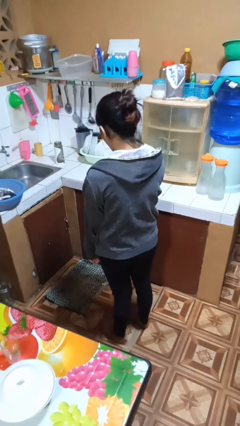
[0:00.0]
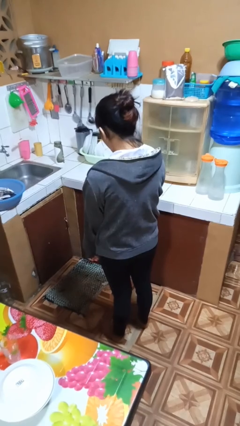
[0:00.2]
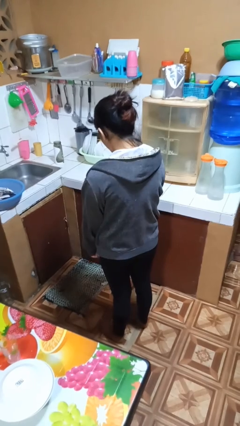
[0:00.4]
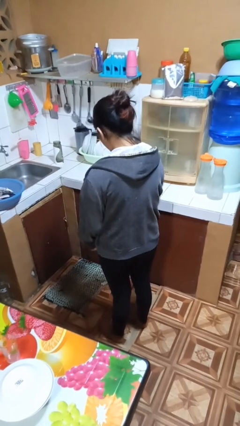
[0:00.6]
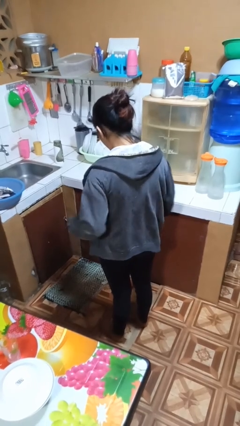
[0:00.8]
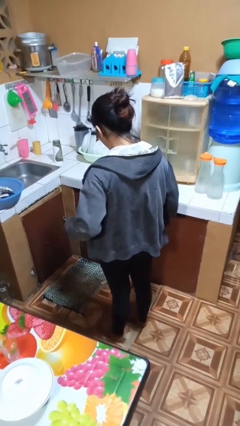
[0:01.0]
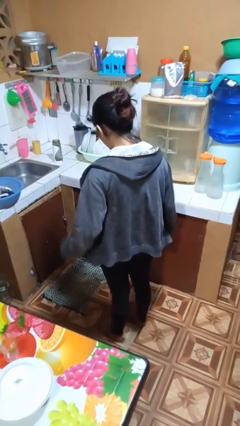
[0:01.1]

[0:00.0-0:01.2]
person unzips jacket

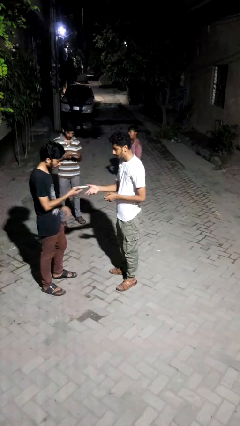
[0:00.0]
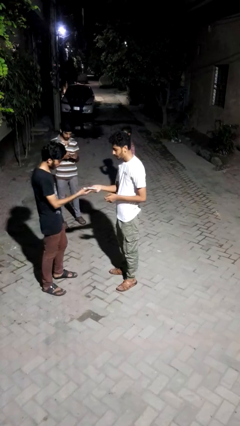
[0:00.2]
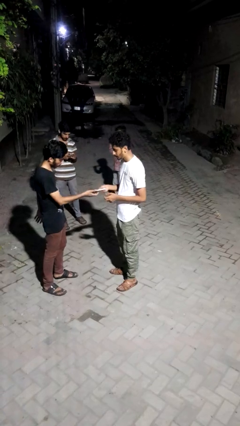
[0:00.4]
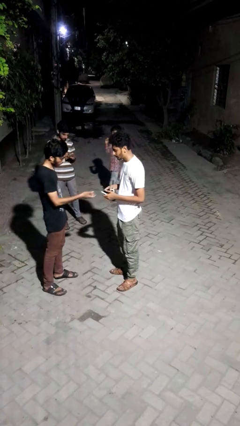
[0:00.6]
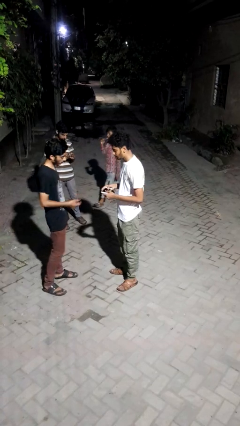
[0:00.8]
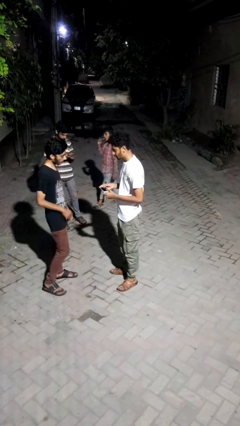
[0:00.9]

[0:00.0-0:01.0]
person transfers object to person

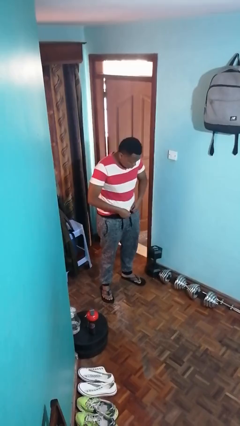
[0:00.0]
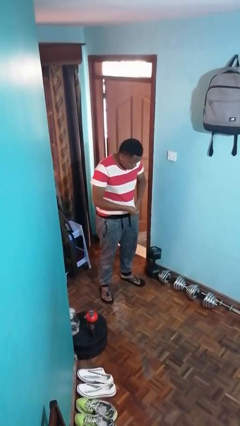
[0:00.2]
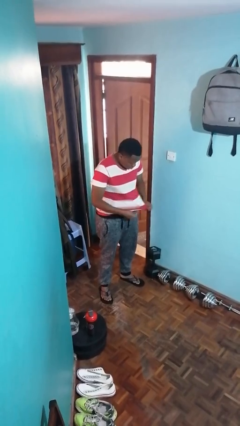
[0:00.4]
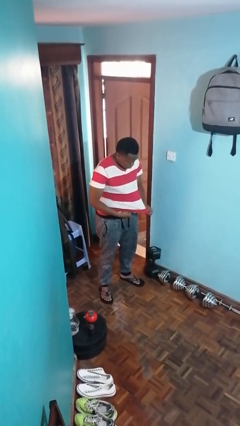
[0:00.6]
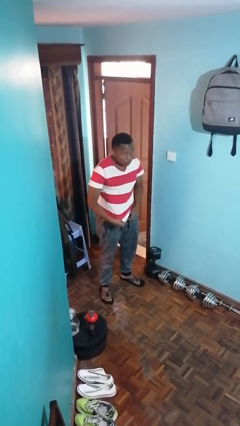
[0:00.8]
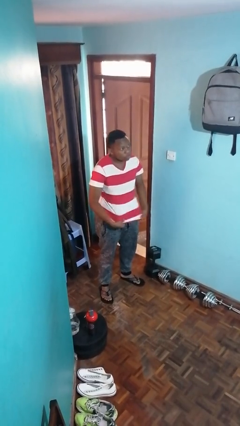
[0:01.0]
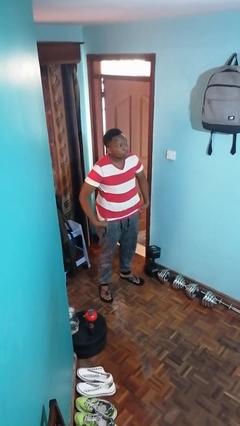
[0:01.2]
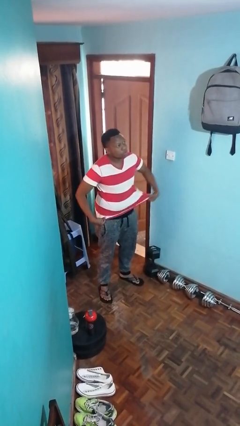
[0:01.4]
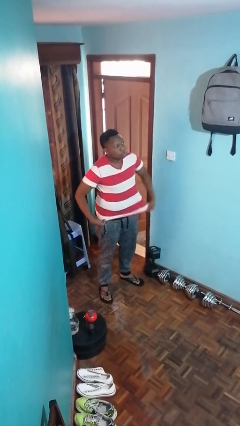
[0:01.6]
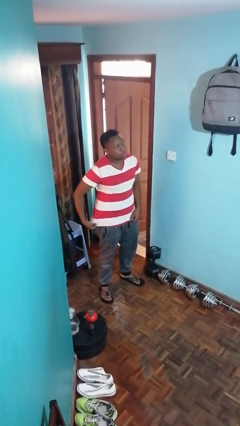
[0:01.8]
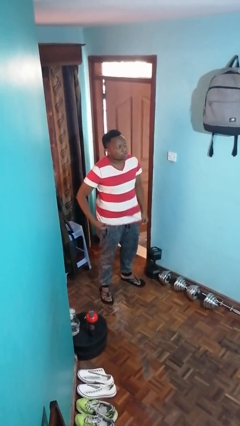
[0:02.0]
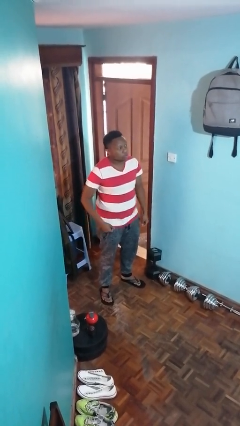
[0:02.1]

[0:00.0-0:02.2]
person untucks shirt

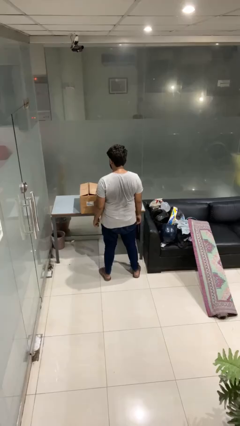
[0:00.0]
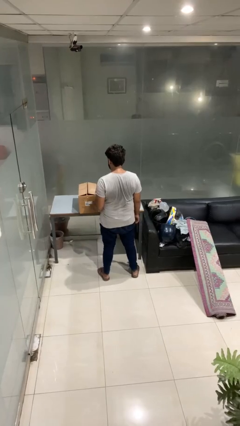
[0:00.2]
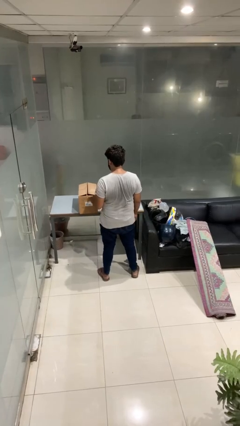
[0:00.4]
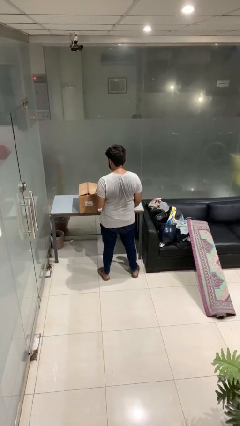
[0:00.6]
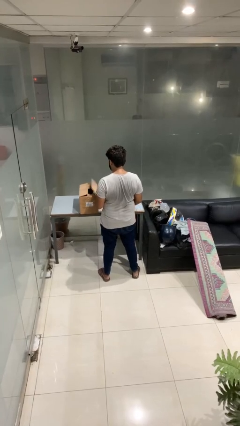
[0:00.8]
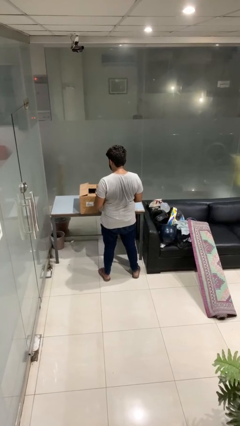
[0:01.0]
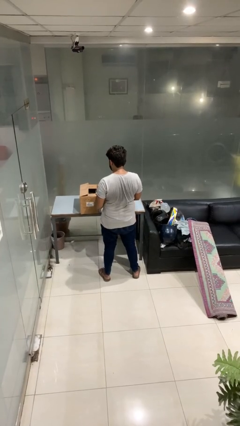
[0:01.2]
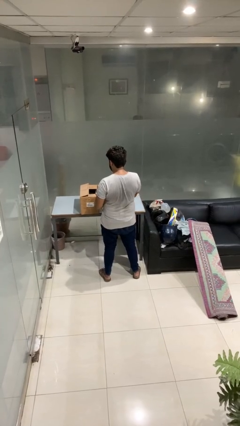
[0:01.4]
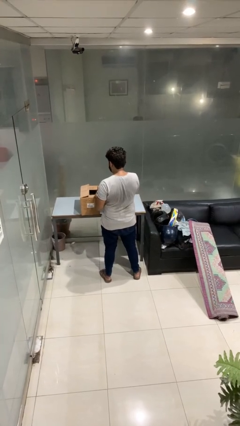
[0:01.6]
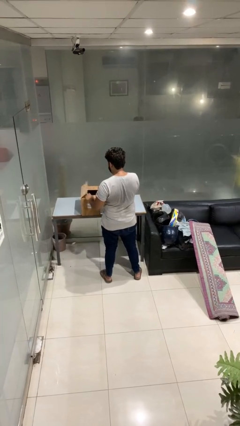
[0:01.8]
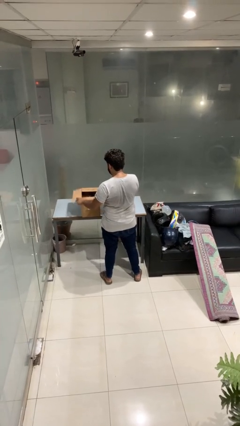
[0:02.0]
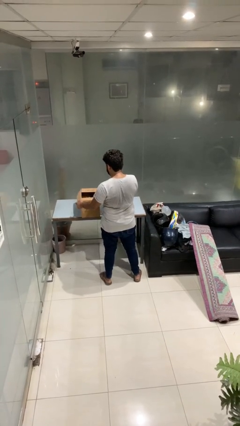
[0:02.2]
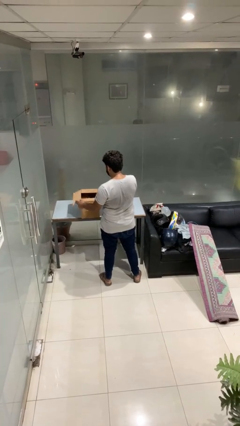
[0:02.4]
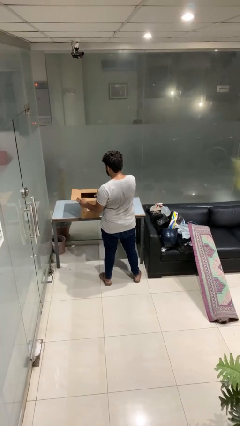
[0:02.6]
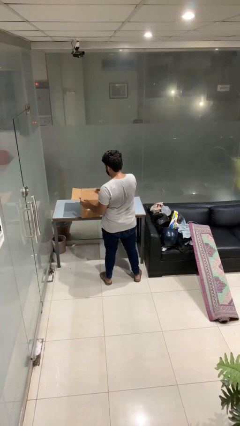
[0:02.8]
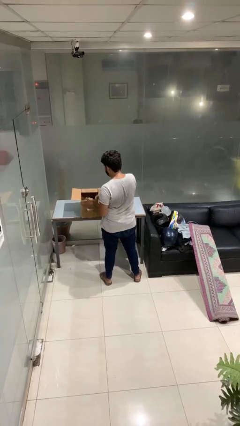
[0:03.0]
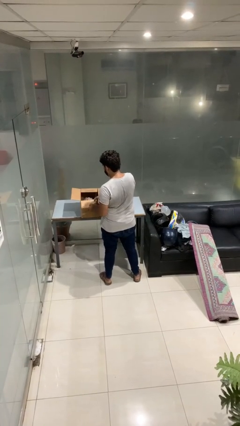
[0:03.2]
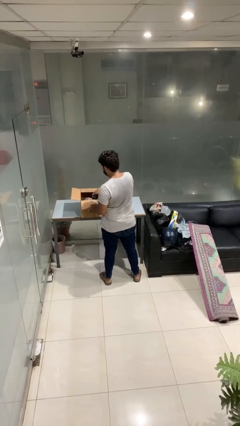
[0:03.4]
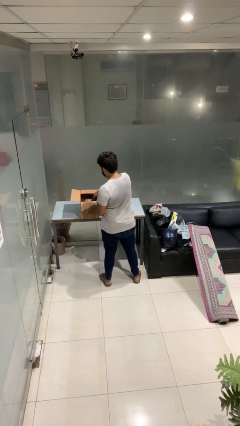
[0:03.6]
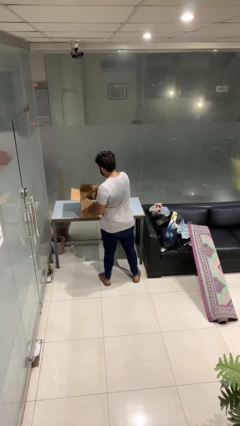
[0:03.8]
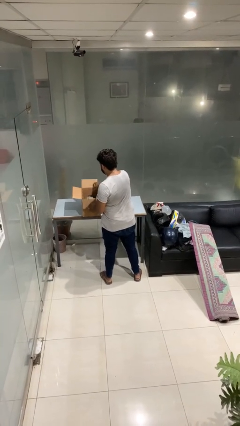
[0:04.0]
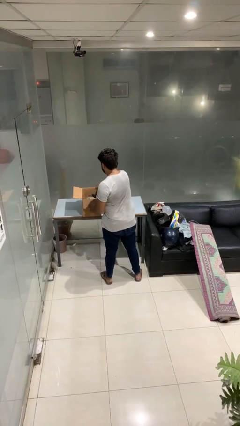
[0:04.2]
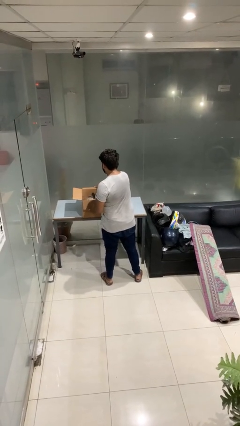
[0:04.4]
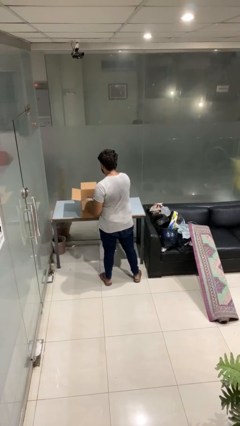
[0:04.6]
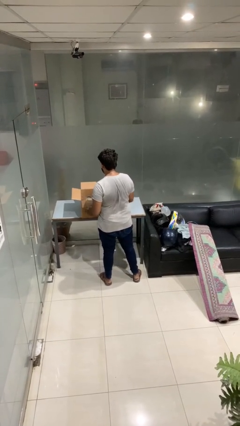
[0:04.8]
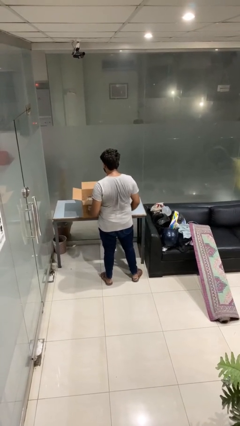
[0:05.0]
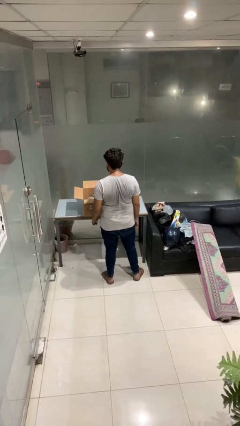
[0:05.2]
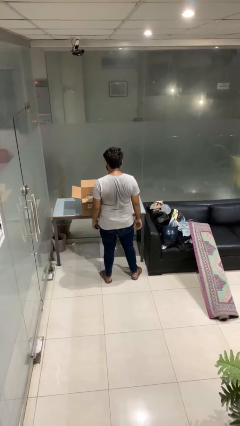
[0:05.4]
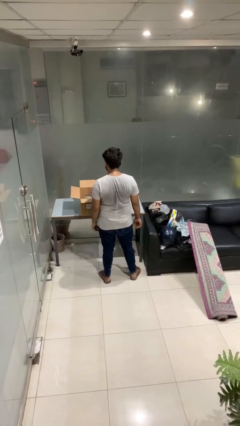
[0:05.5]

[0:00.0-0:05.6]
person opens box

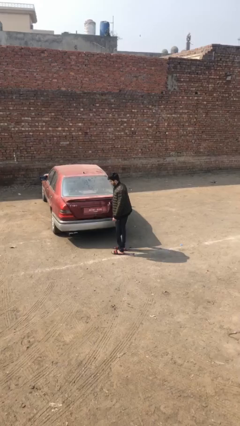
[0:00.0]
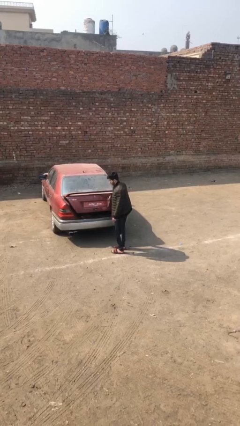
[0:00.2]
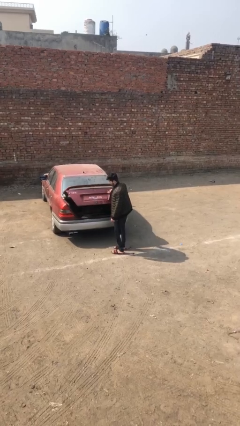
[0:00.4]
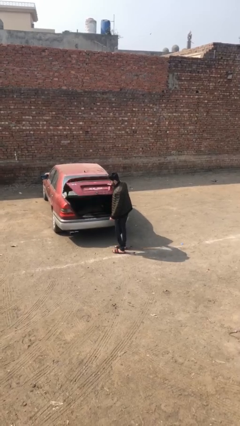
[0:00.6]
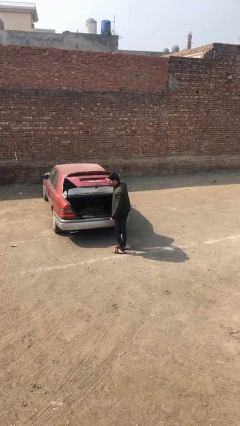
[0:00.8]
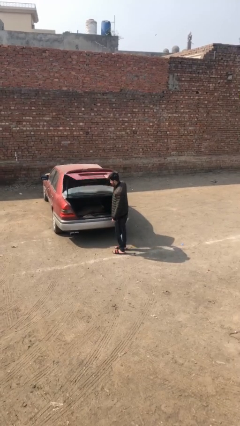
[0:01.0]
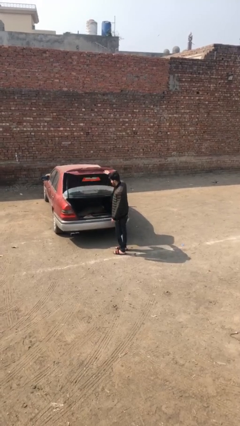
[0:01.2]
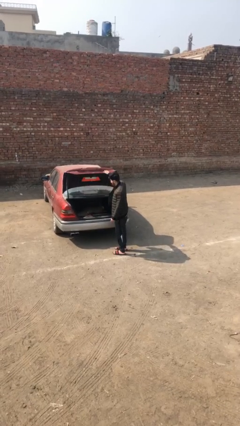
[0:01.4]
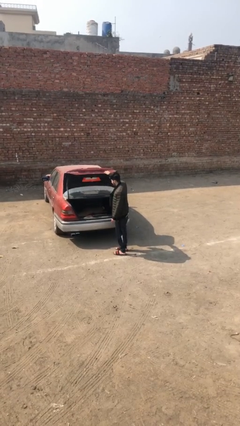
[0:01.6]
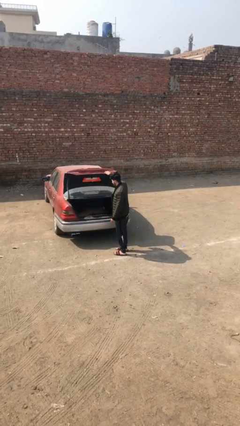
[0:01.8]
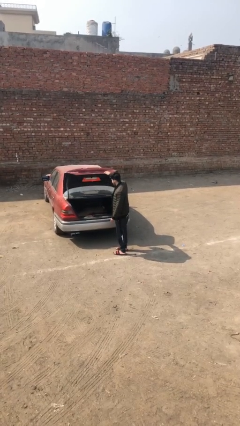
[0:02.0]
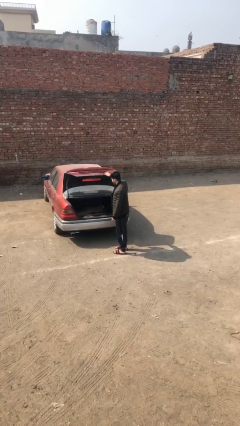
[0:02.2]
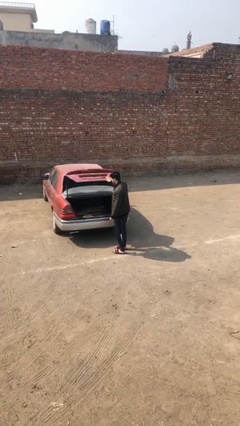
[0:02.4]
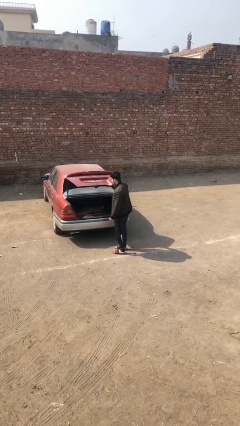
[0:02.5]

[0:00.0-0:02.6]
person opens car trunk

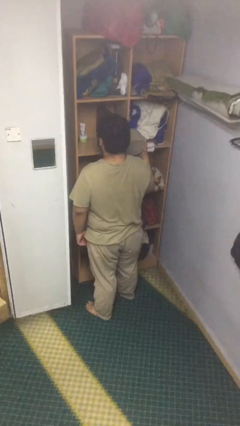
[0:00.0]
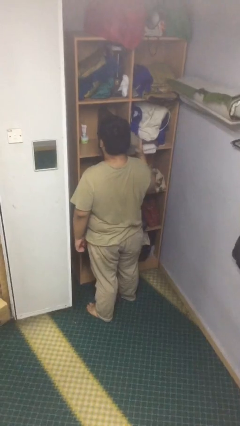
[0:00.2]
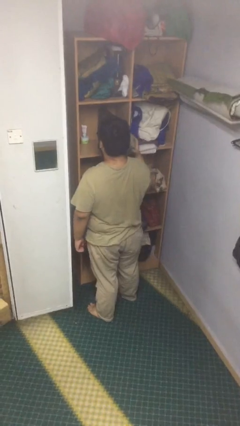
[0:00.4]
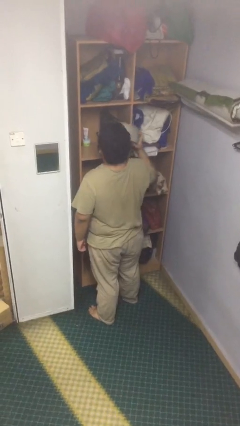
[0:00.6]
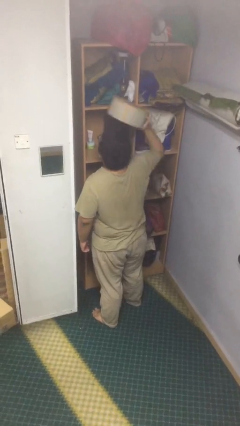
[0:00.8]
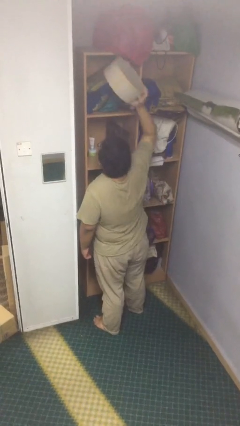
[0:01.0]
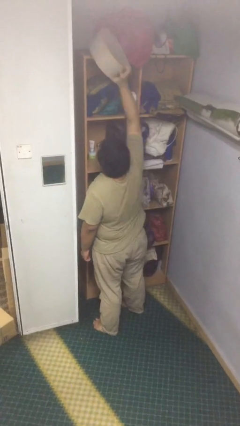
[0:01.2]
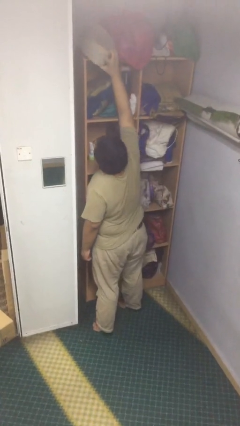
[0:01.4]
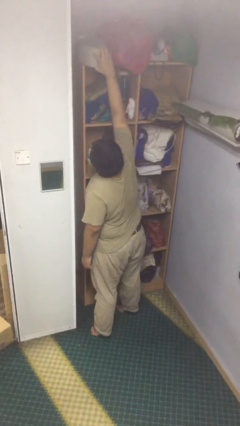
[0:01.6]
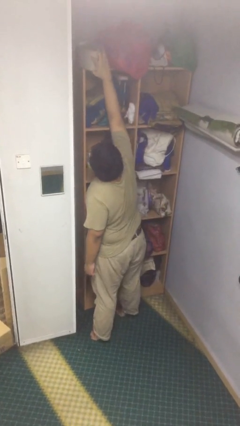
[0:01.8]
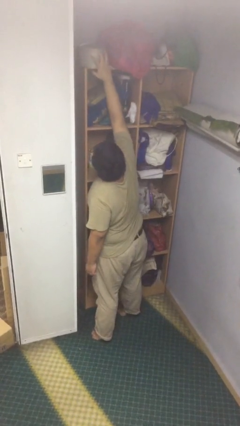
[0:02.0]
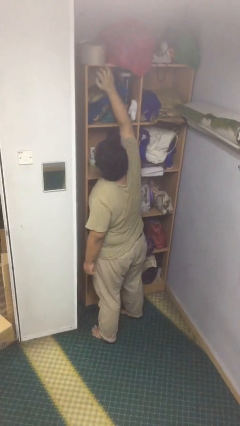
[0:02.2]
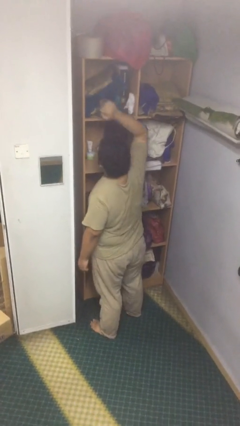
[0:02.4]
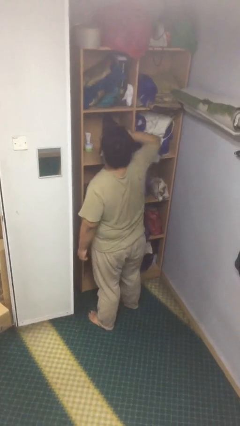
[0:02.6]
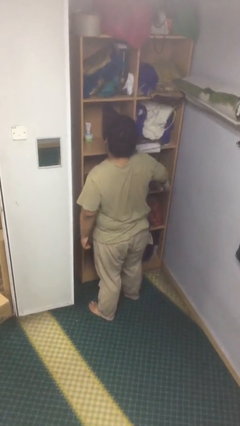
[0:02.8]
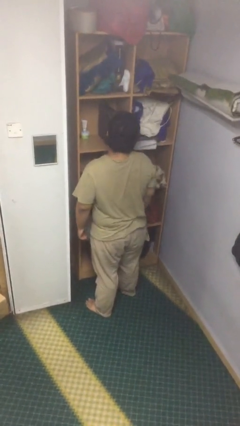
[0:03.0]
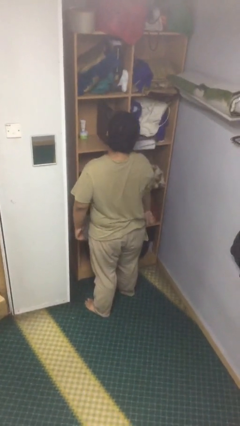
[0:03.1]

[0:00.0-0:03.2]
person puts down object on shelf

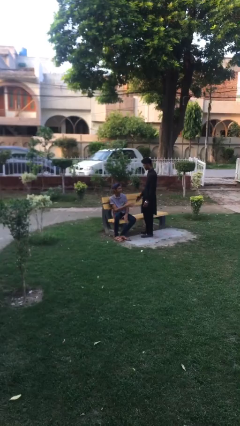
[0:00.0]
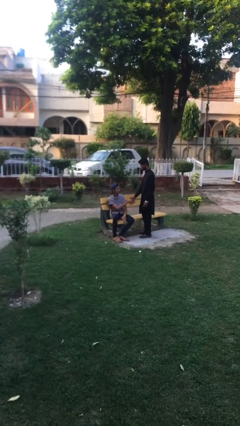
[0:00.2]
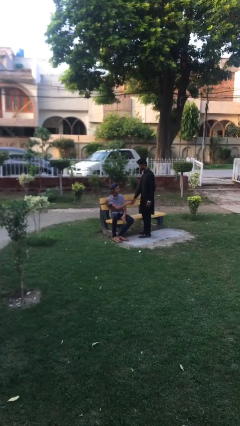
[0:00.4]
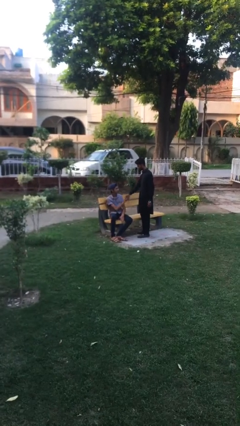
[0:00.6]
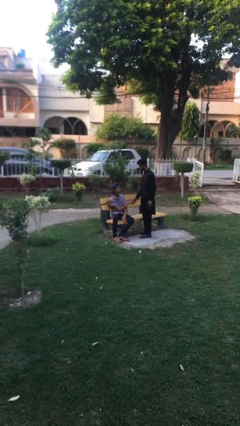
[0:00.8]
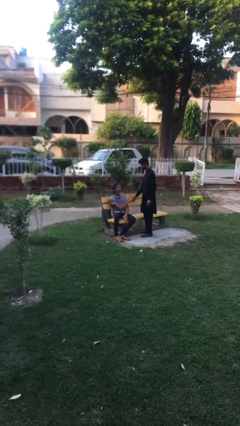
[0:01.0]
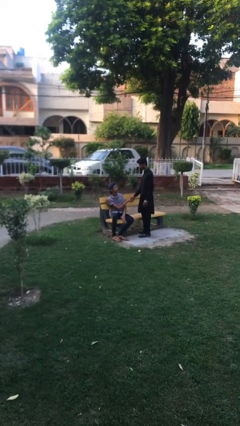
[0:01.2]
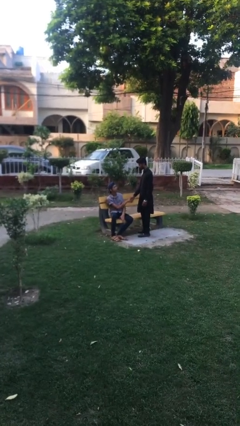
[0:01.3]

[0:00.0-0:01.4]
person shakes hand
